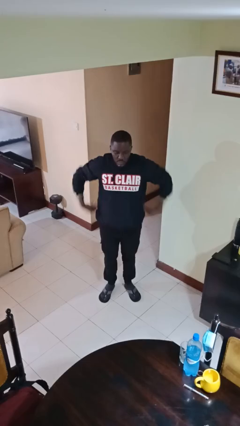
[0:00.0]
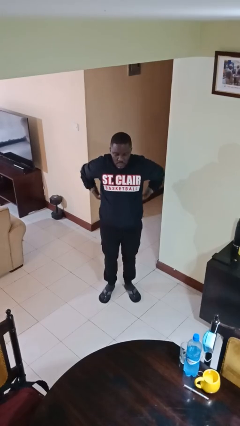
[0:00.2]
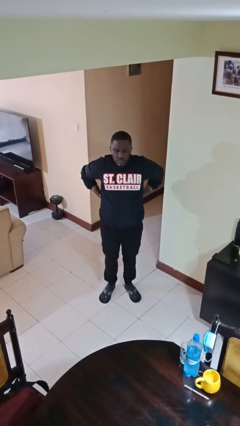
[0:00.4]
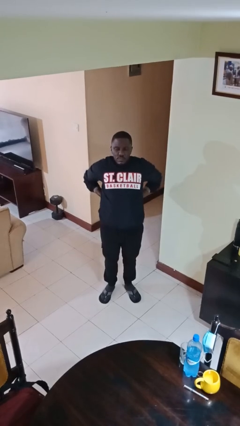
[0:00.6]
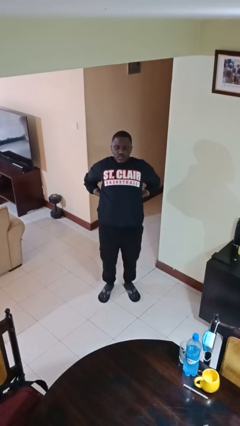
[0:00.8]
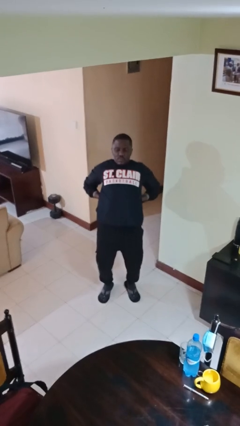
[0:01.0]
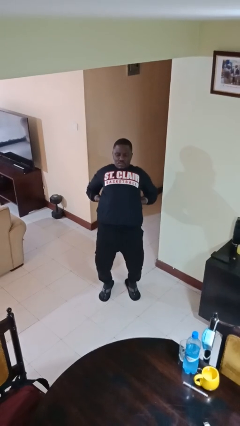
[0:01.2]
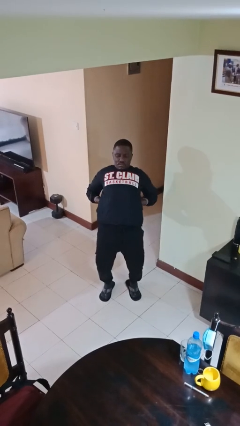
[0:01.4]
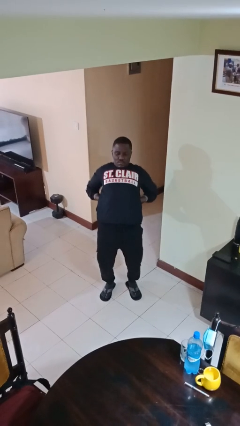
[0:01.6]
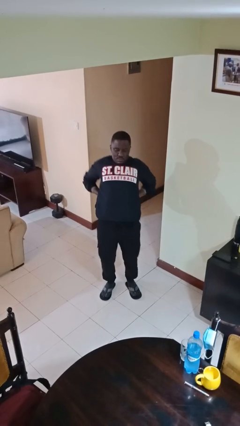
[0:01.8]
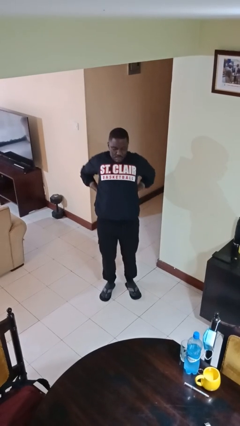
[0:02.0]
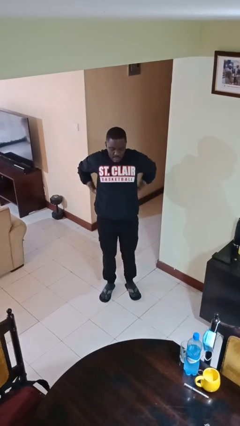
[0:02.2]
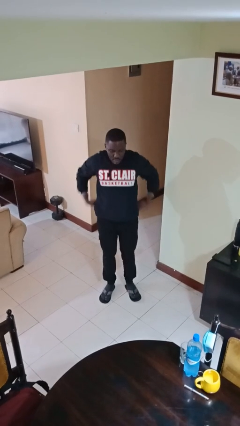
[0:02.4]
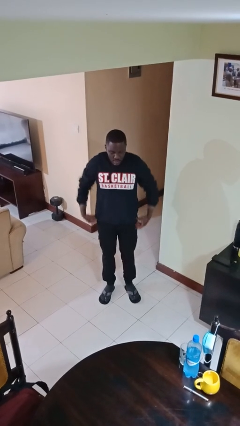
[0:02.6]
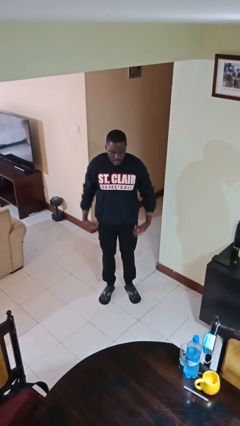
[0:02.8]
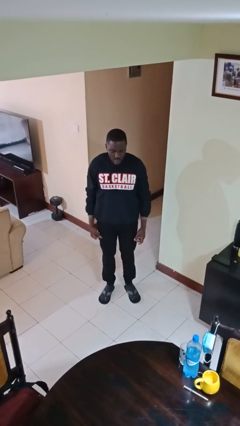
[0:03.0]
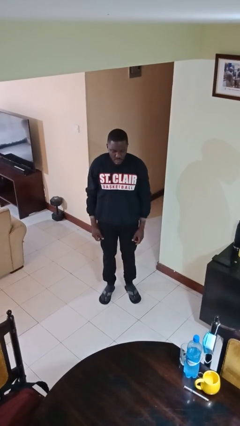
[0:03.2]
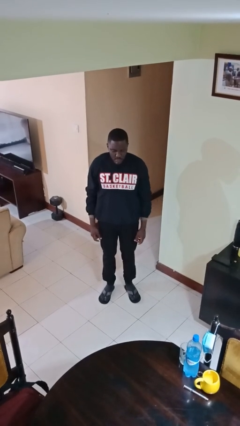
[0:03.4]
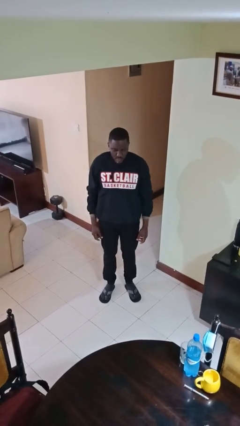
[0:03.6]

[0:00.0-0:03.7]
person stretches back

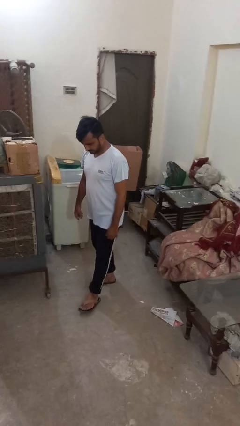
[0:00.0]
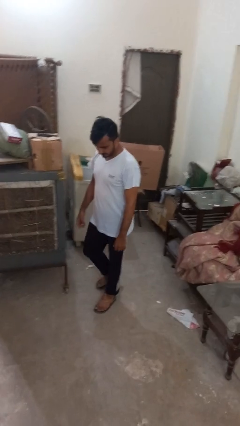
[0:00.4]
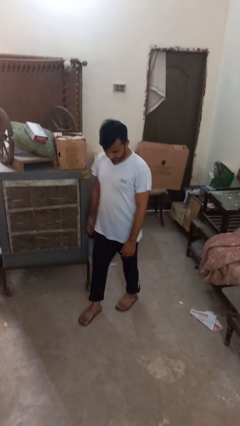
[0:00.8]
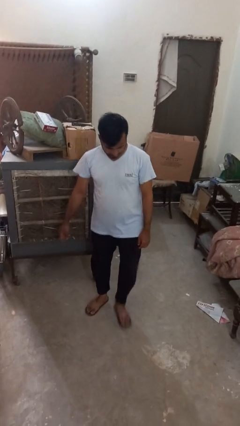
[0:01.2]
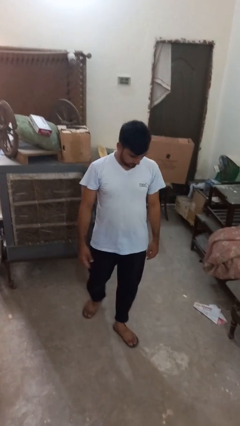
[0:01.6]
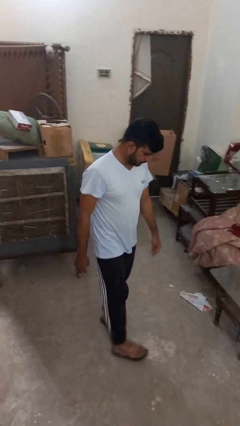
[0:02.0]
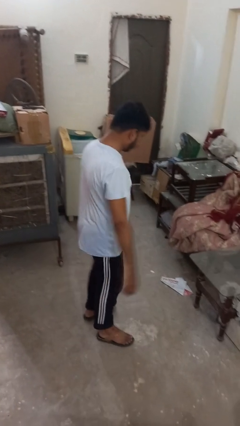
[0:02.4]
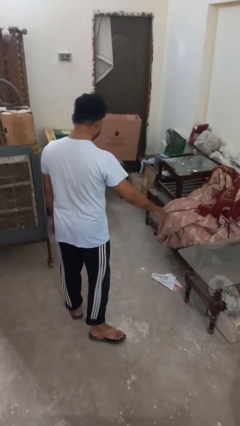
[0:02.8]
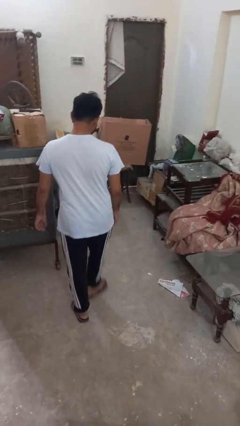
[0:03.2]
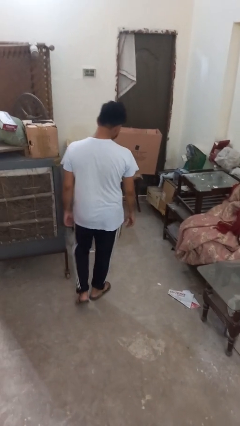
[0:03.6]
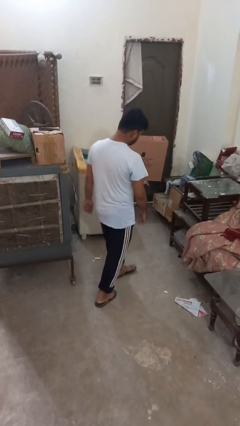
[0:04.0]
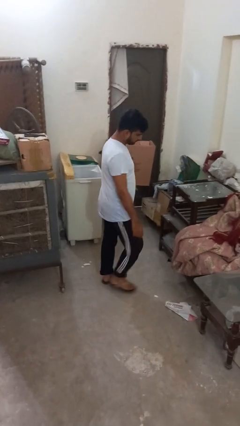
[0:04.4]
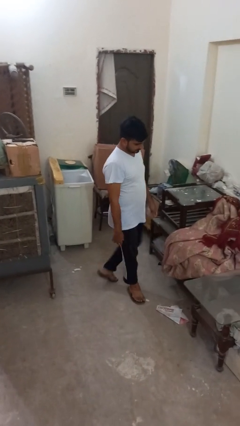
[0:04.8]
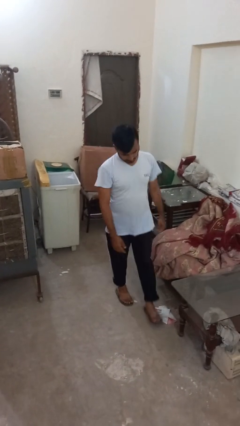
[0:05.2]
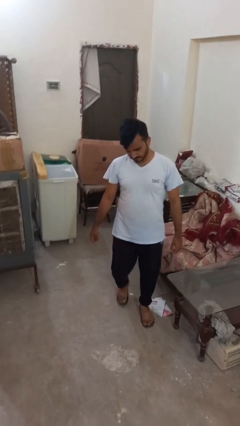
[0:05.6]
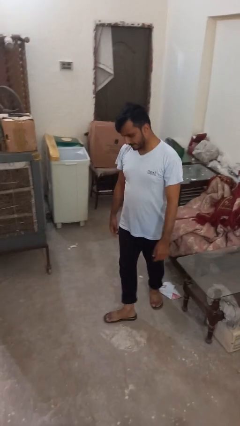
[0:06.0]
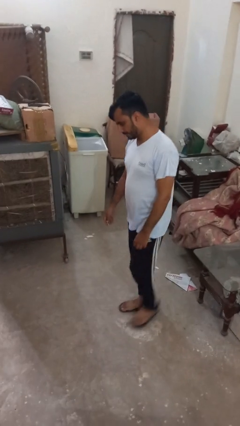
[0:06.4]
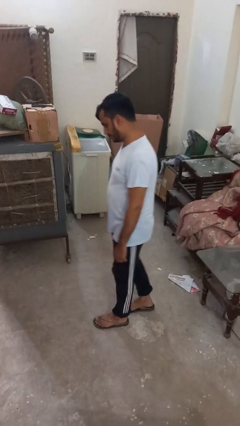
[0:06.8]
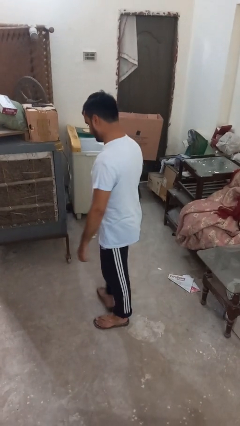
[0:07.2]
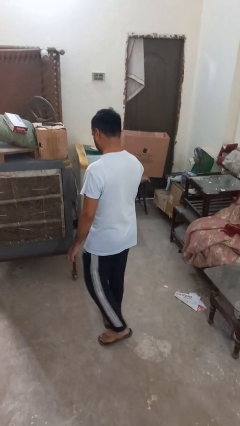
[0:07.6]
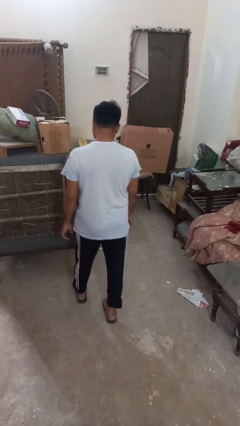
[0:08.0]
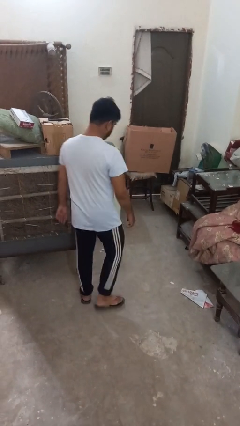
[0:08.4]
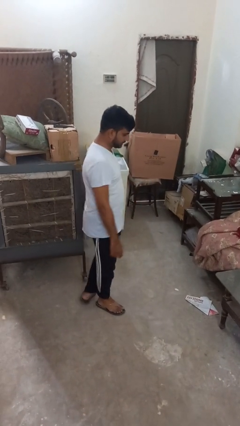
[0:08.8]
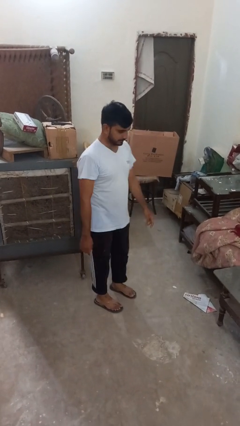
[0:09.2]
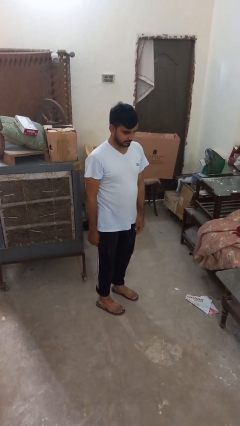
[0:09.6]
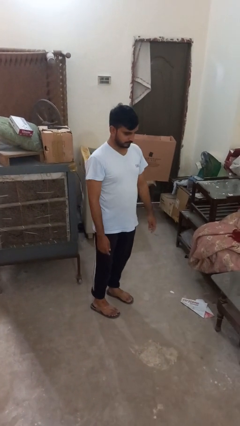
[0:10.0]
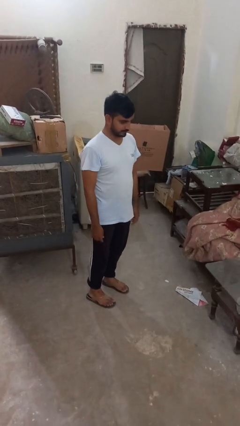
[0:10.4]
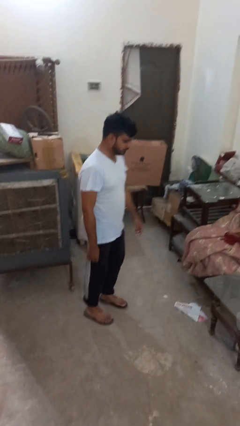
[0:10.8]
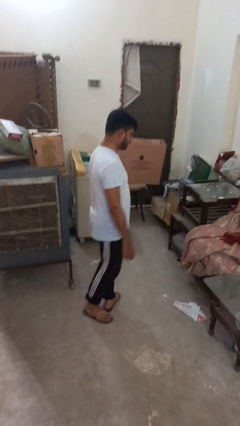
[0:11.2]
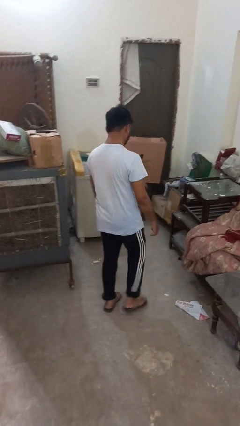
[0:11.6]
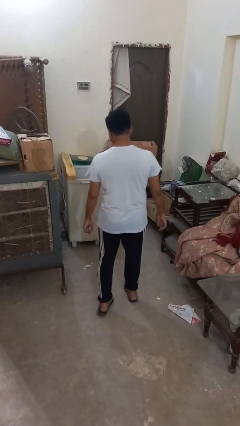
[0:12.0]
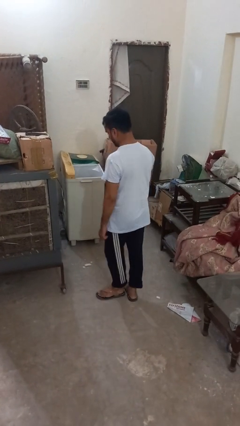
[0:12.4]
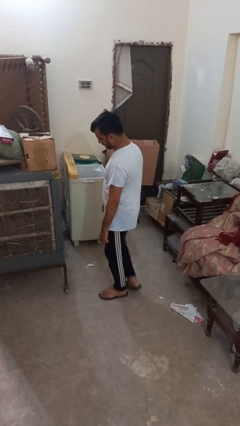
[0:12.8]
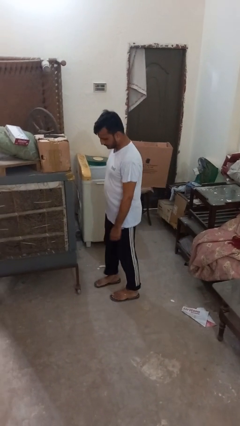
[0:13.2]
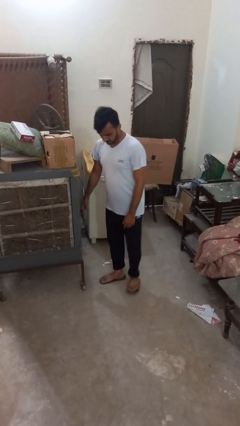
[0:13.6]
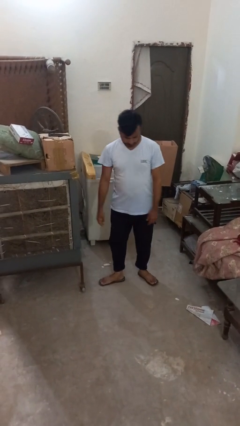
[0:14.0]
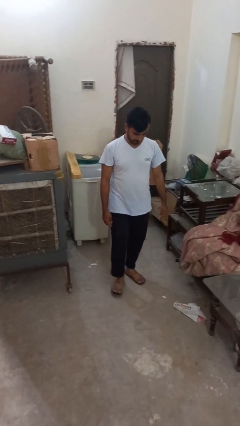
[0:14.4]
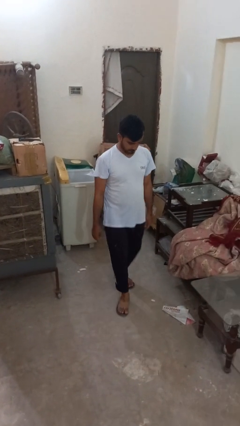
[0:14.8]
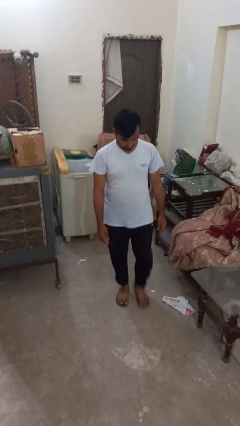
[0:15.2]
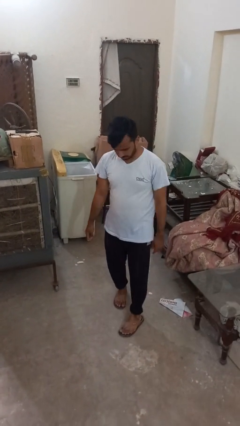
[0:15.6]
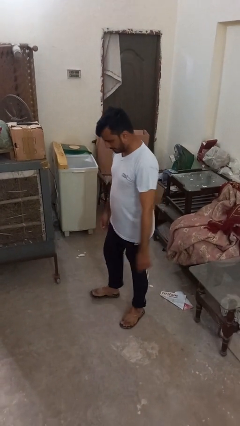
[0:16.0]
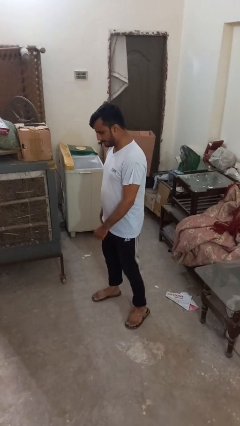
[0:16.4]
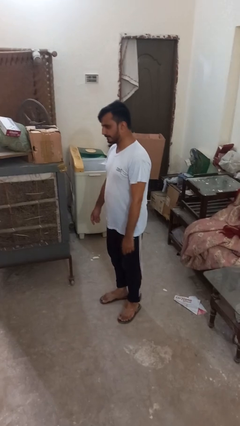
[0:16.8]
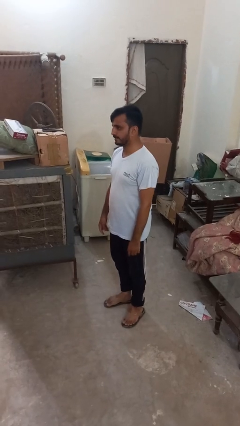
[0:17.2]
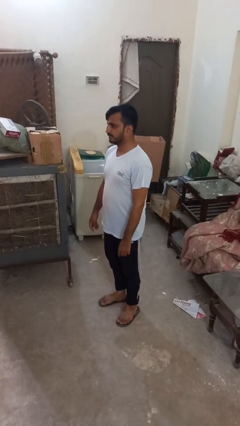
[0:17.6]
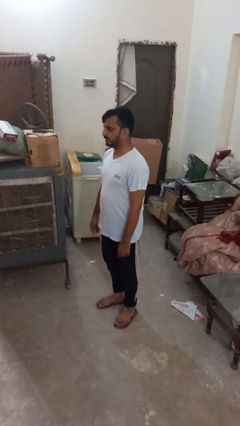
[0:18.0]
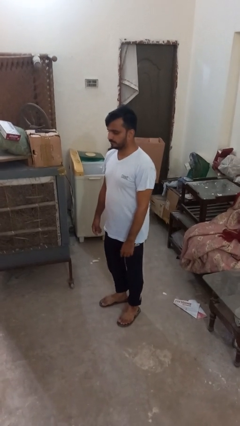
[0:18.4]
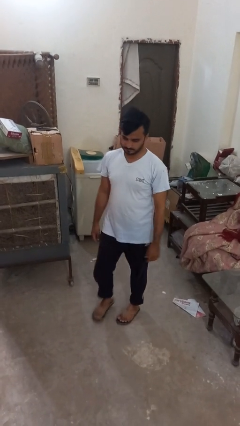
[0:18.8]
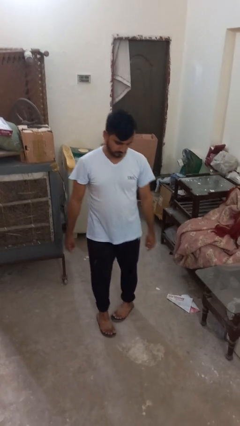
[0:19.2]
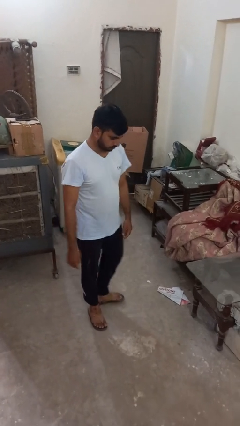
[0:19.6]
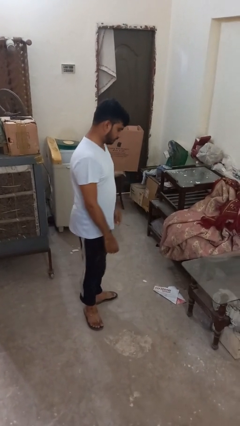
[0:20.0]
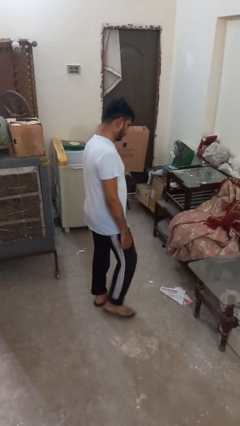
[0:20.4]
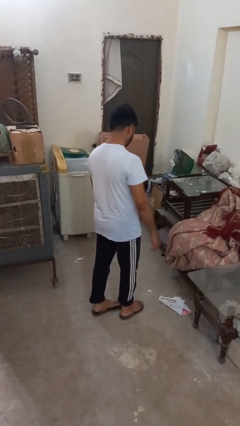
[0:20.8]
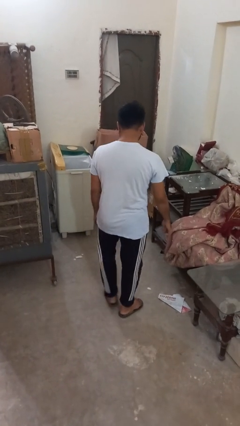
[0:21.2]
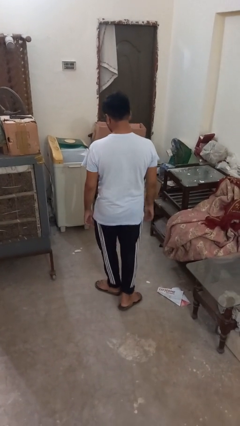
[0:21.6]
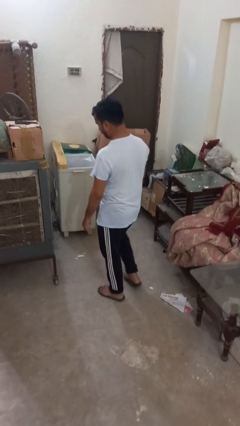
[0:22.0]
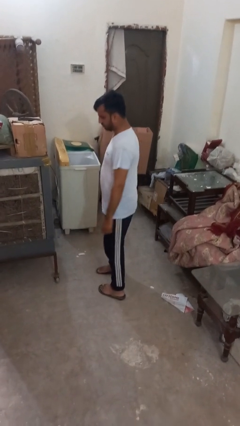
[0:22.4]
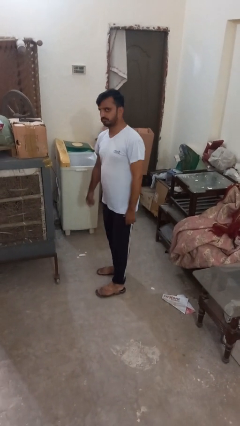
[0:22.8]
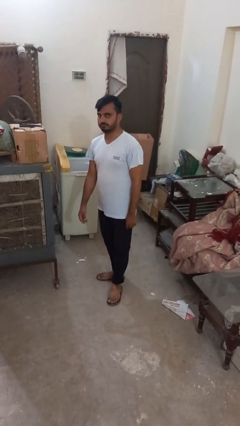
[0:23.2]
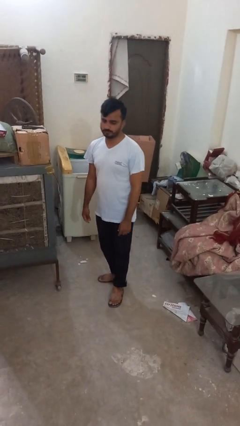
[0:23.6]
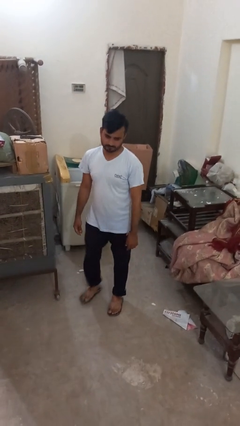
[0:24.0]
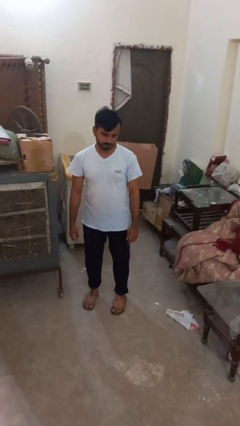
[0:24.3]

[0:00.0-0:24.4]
person twirls

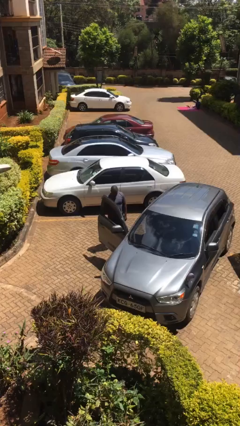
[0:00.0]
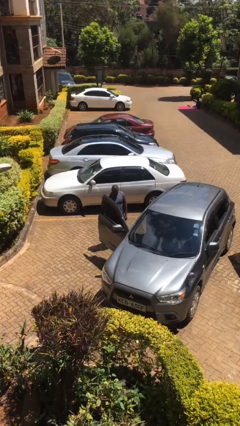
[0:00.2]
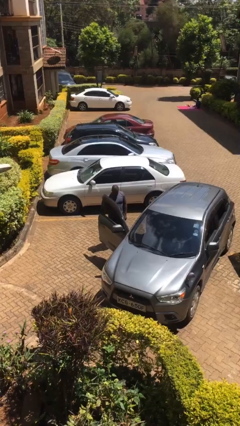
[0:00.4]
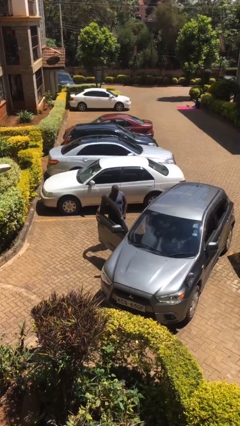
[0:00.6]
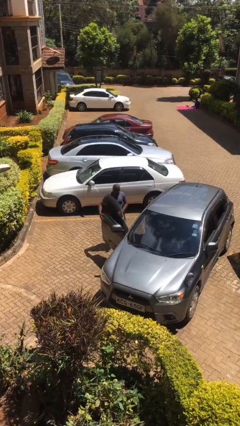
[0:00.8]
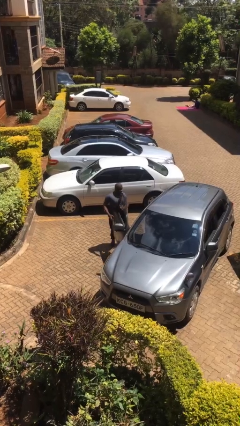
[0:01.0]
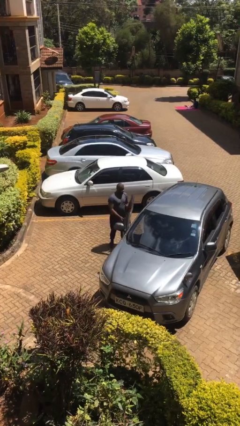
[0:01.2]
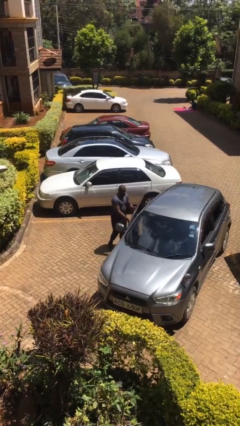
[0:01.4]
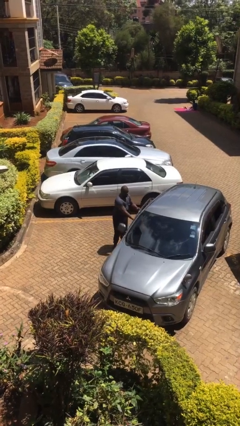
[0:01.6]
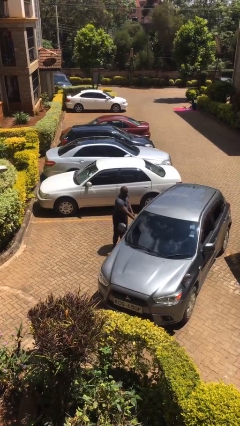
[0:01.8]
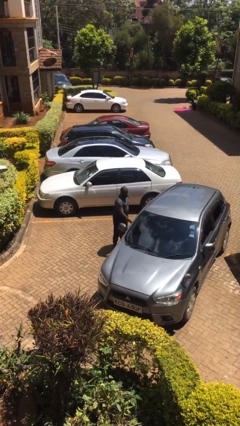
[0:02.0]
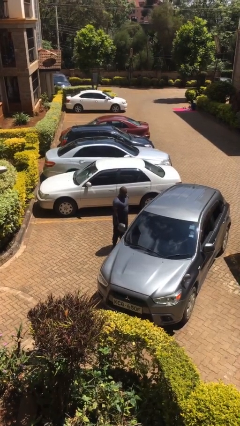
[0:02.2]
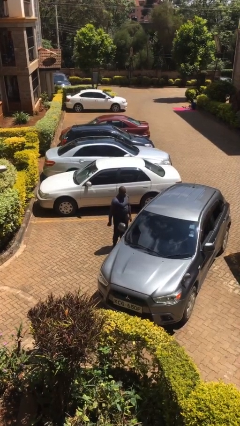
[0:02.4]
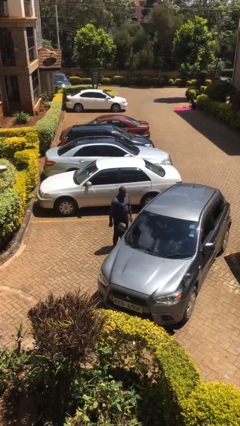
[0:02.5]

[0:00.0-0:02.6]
person closes car door
